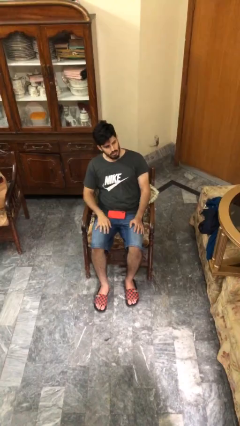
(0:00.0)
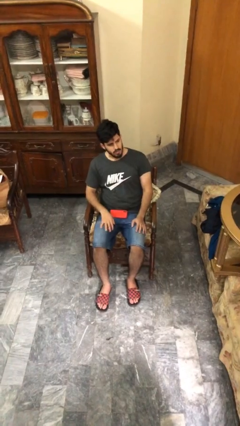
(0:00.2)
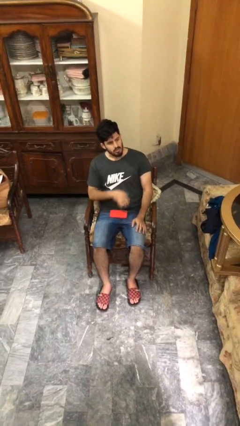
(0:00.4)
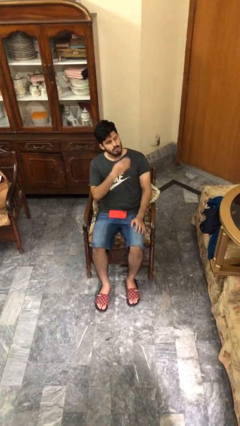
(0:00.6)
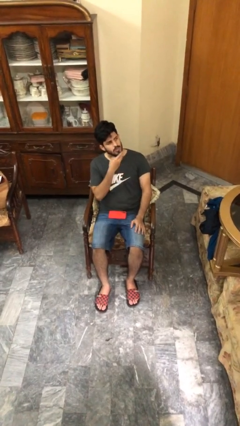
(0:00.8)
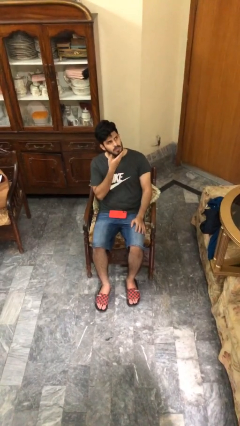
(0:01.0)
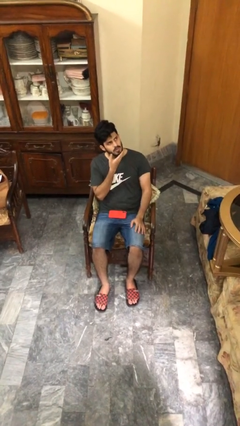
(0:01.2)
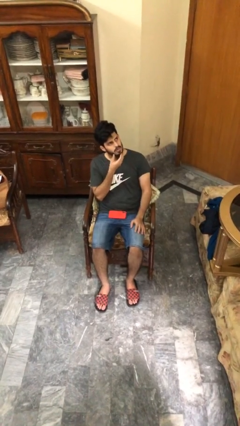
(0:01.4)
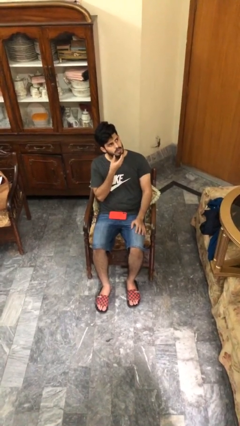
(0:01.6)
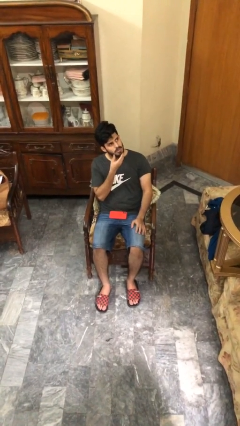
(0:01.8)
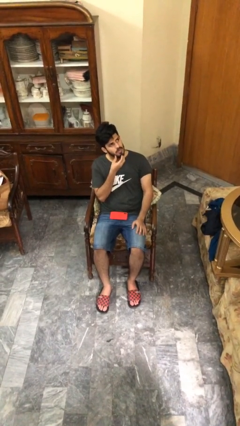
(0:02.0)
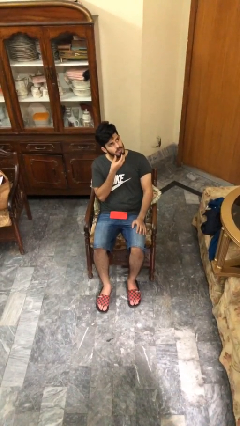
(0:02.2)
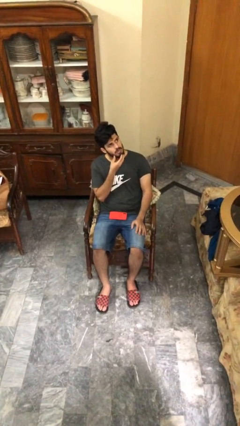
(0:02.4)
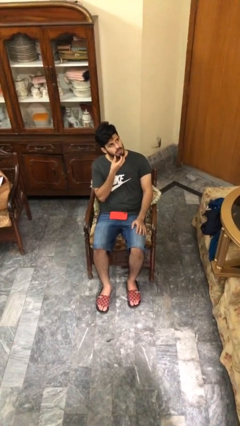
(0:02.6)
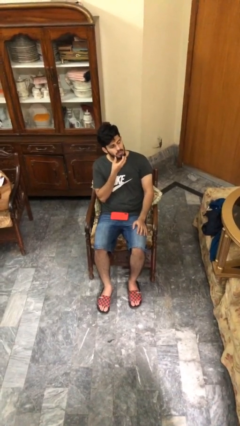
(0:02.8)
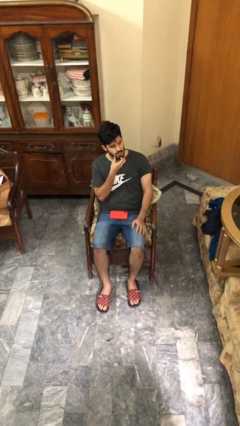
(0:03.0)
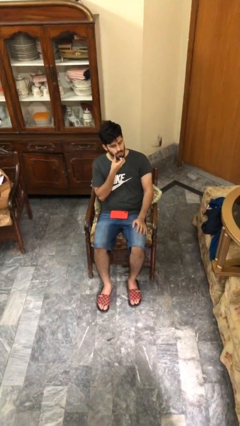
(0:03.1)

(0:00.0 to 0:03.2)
person strokes chin

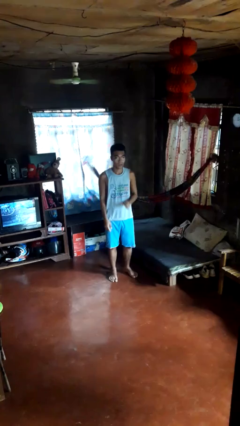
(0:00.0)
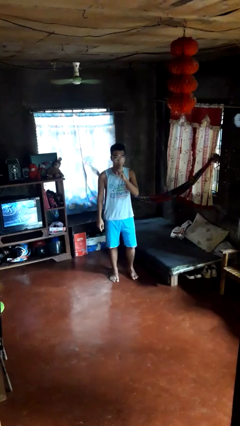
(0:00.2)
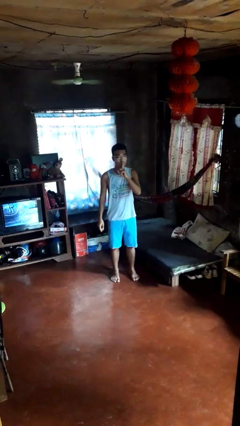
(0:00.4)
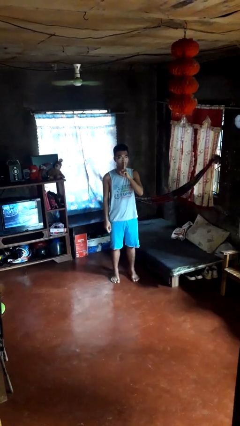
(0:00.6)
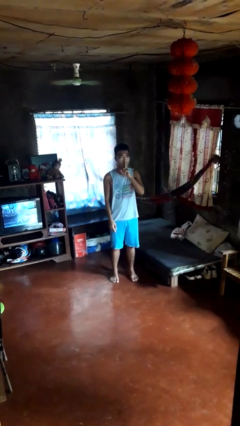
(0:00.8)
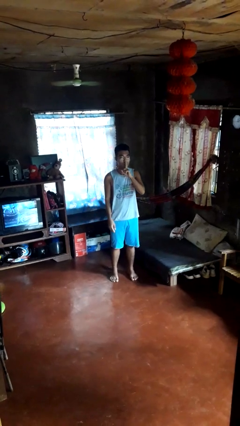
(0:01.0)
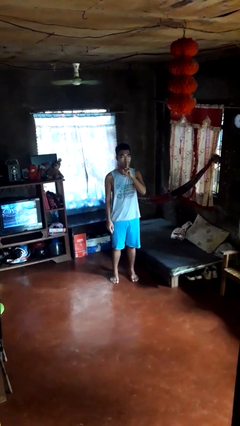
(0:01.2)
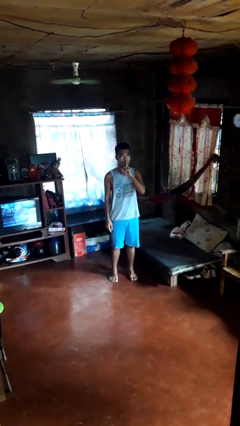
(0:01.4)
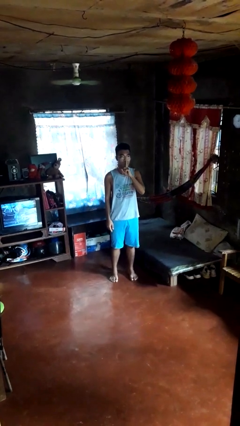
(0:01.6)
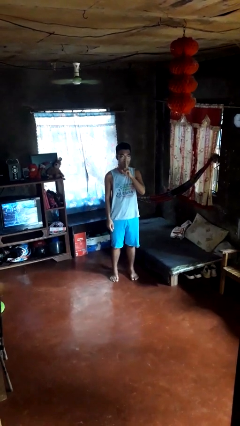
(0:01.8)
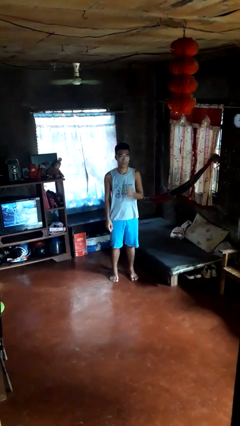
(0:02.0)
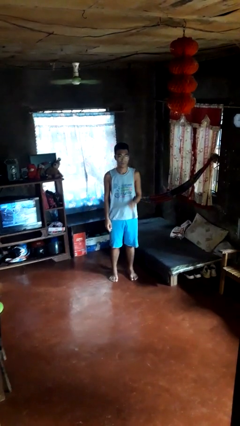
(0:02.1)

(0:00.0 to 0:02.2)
person gestures be quiet

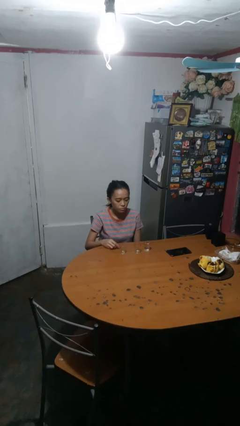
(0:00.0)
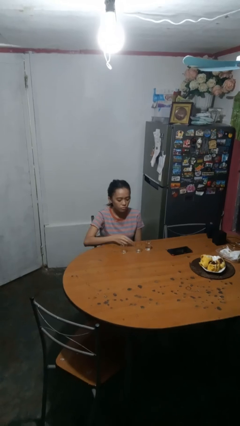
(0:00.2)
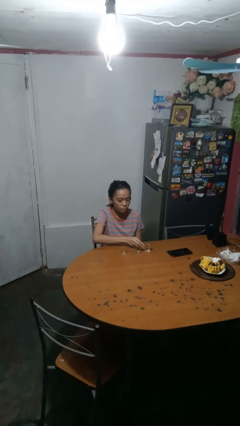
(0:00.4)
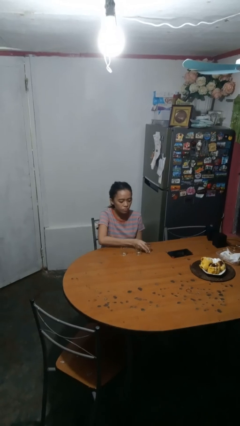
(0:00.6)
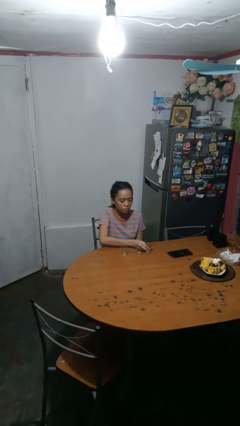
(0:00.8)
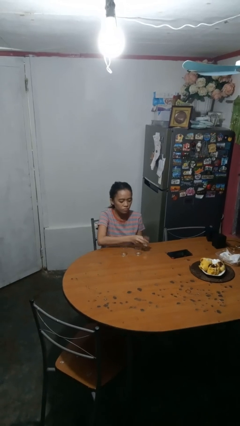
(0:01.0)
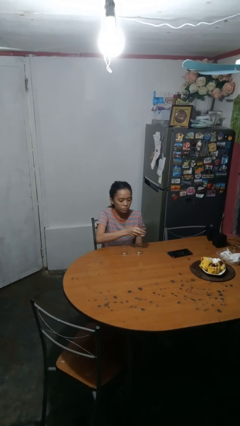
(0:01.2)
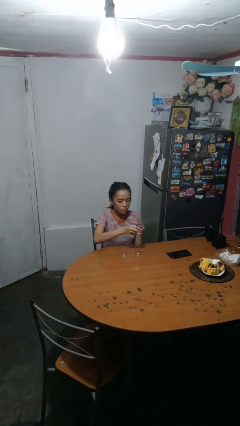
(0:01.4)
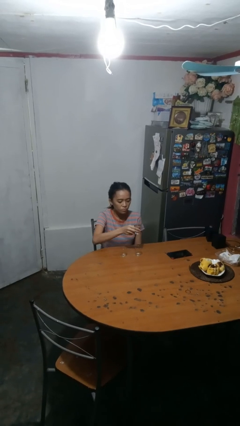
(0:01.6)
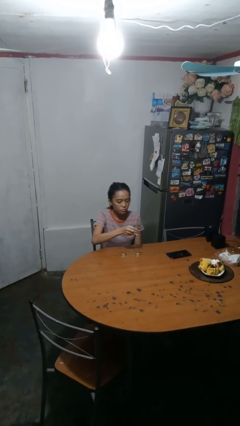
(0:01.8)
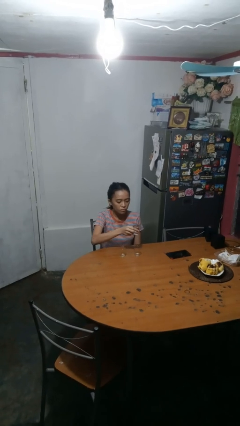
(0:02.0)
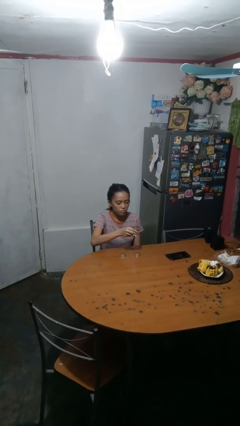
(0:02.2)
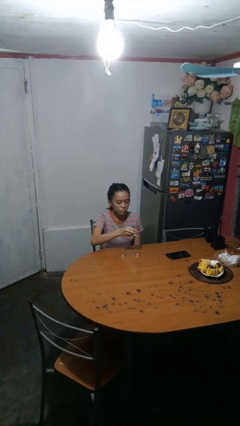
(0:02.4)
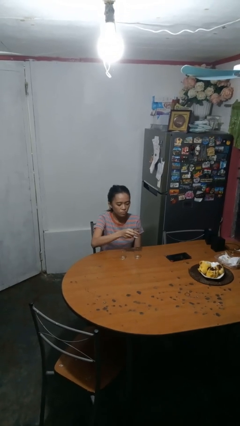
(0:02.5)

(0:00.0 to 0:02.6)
person picks up object from table

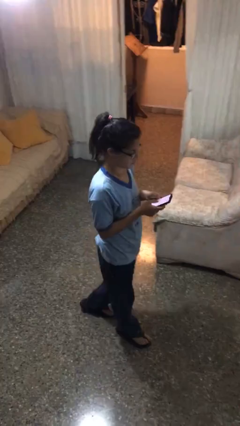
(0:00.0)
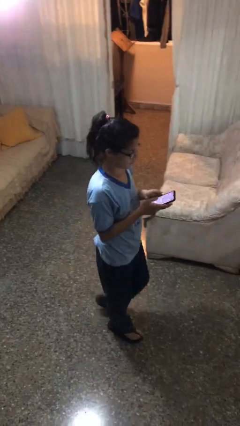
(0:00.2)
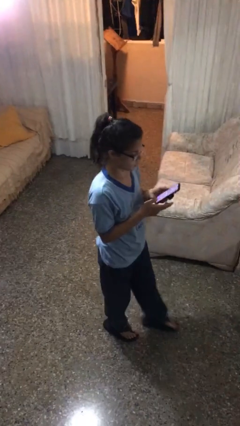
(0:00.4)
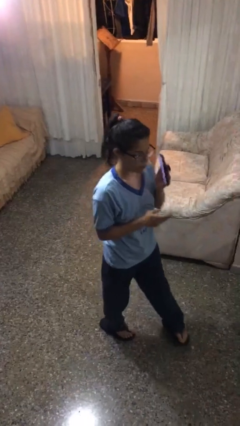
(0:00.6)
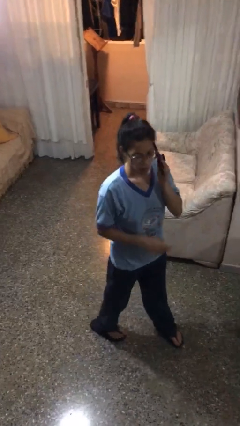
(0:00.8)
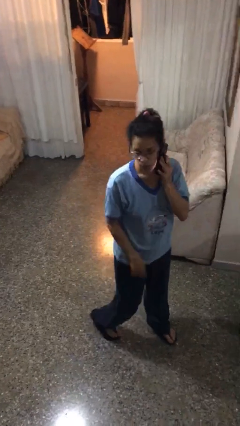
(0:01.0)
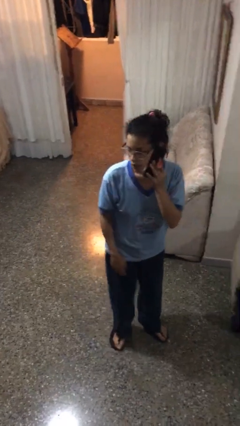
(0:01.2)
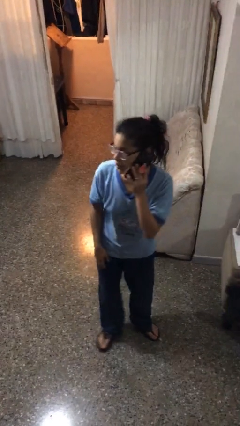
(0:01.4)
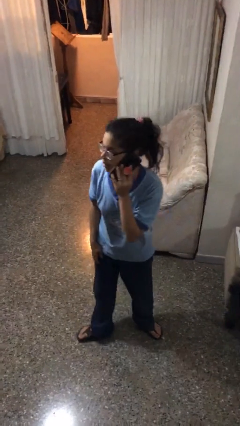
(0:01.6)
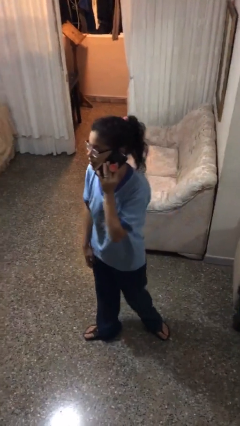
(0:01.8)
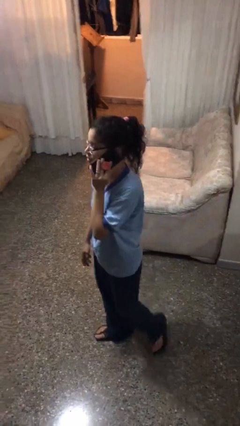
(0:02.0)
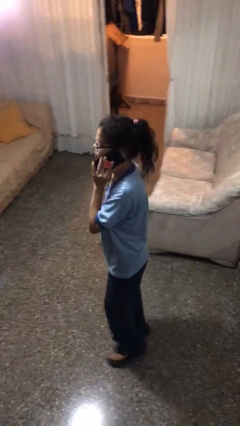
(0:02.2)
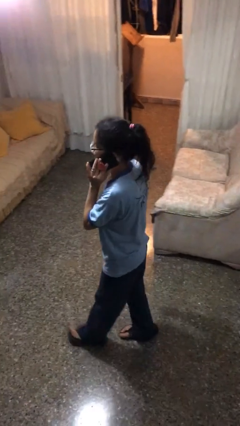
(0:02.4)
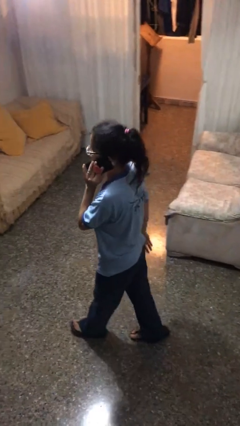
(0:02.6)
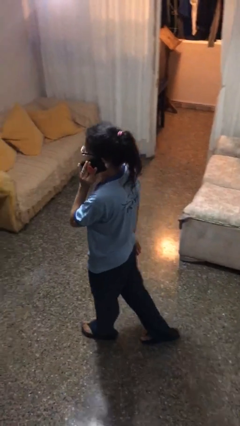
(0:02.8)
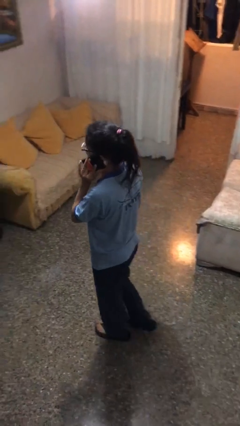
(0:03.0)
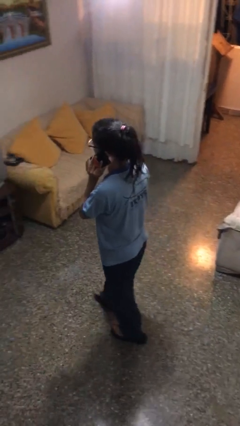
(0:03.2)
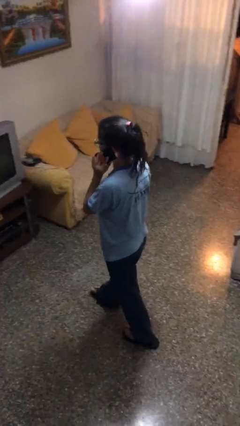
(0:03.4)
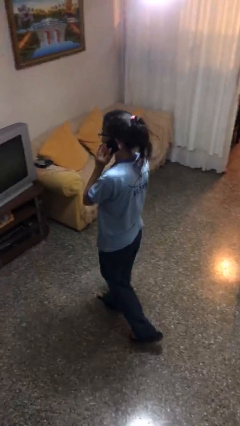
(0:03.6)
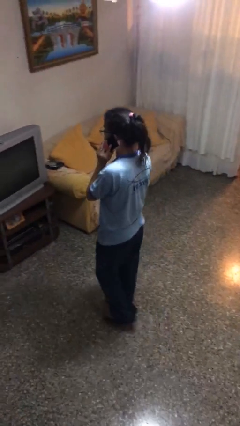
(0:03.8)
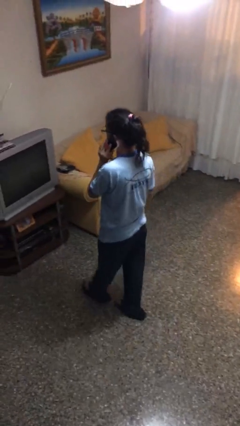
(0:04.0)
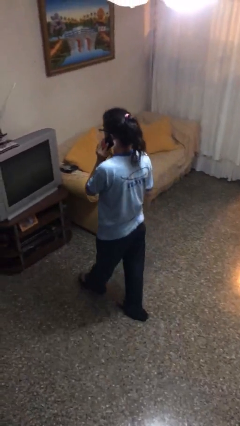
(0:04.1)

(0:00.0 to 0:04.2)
person talks on phone

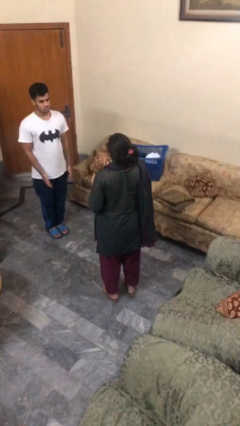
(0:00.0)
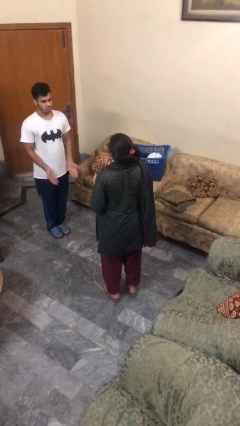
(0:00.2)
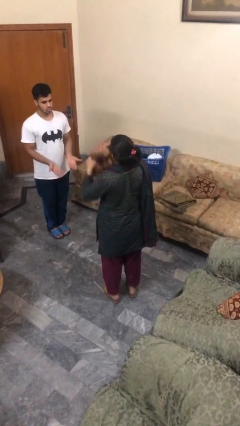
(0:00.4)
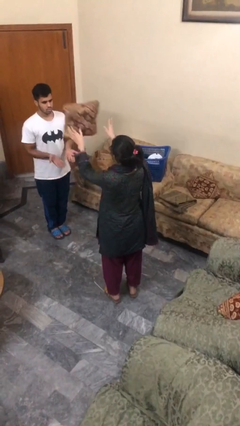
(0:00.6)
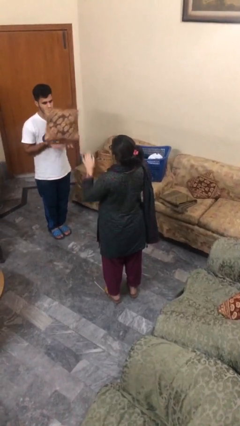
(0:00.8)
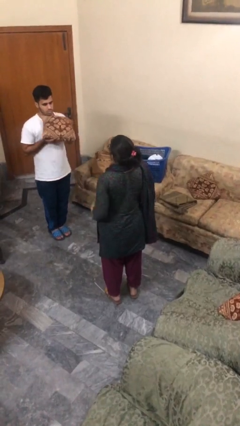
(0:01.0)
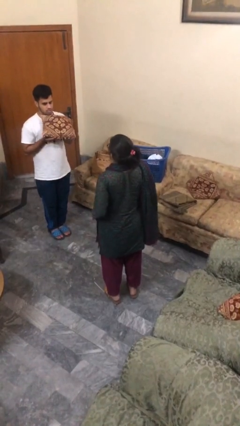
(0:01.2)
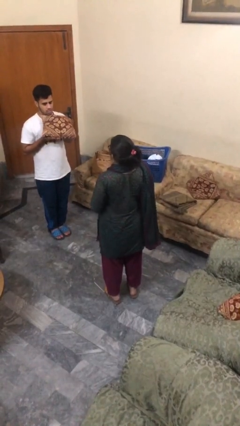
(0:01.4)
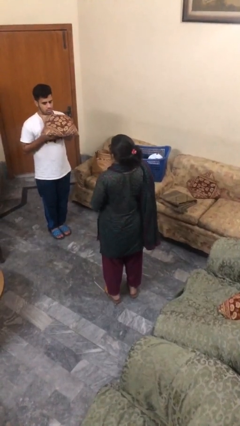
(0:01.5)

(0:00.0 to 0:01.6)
person throws object to person

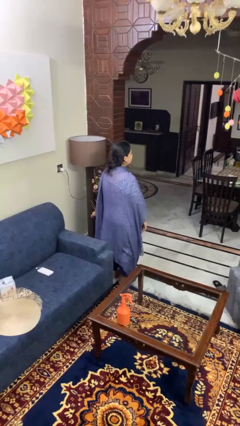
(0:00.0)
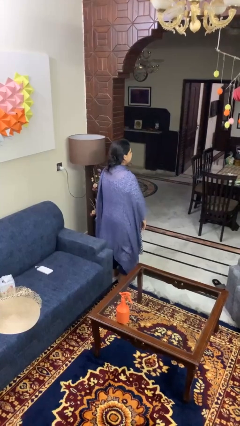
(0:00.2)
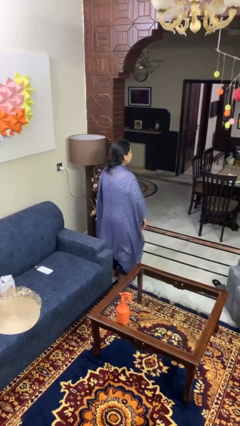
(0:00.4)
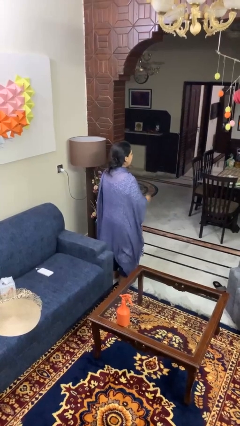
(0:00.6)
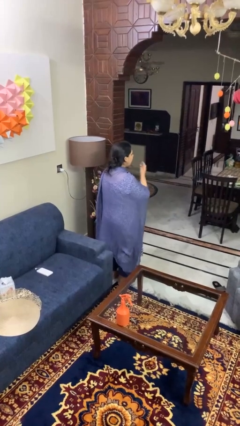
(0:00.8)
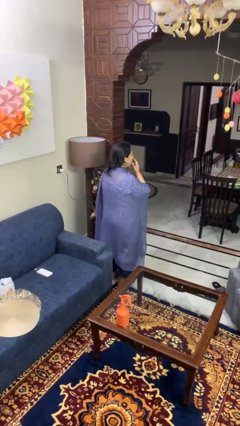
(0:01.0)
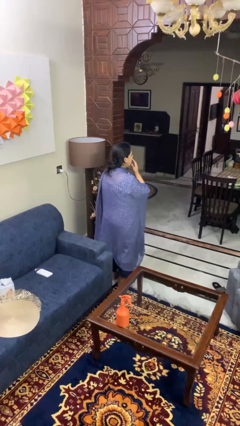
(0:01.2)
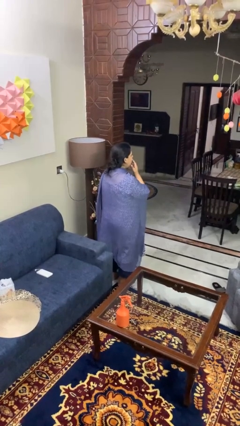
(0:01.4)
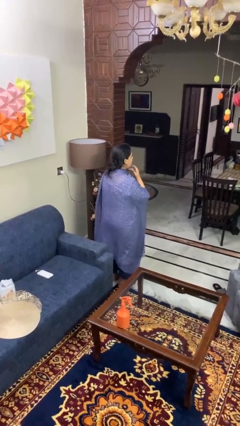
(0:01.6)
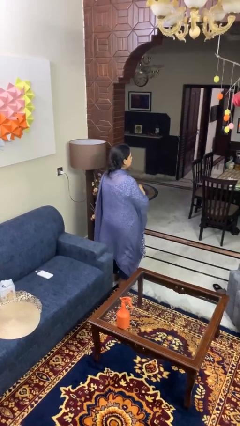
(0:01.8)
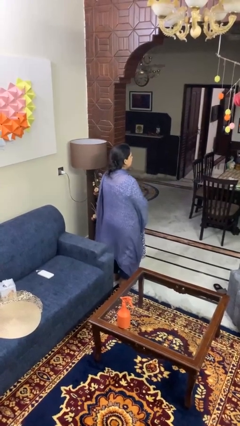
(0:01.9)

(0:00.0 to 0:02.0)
person yawns

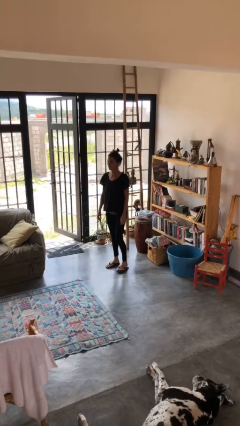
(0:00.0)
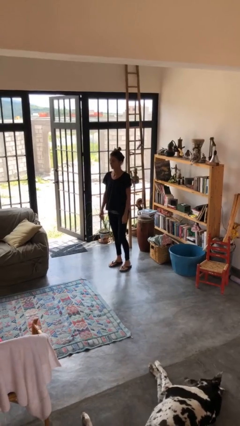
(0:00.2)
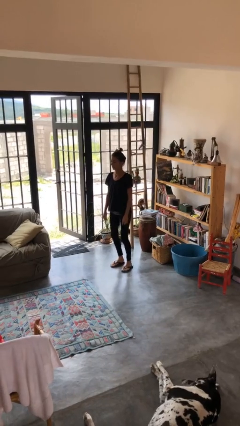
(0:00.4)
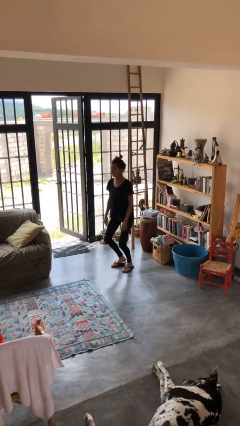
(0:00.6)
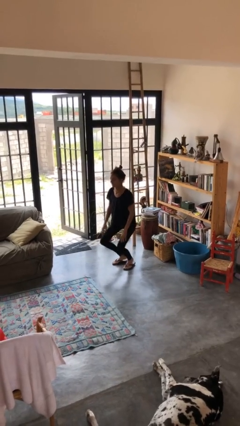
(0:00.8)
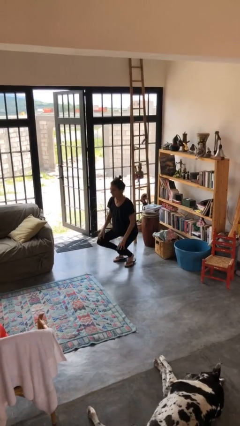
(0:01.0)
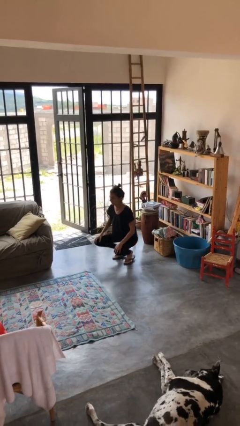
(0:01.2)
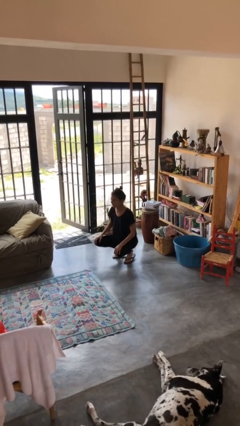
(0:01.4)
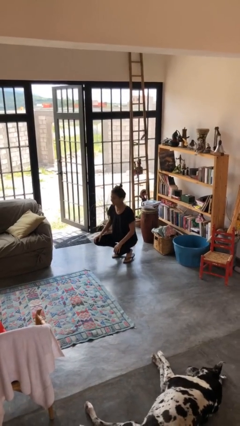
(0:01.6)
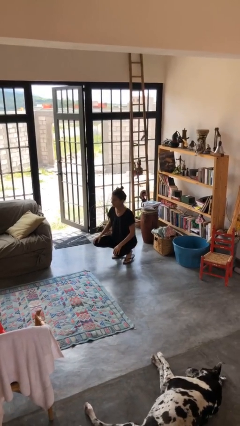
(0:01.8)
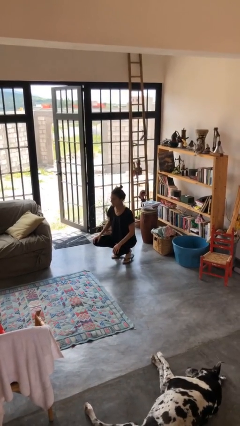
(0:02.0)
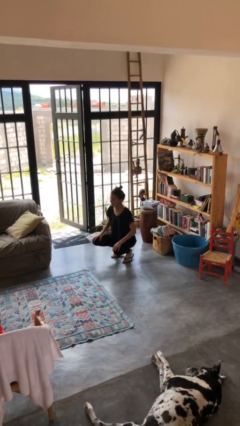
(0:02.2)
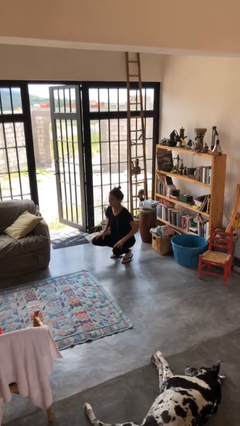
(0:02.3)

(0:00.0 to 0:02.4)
person squats
